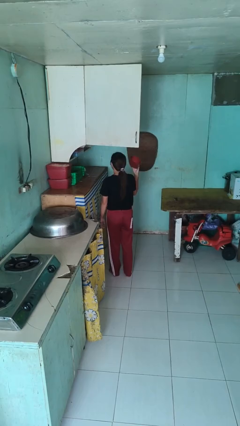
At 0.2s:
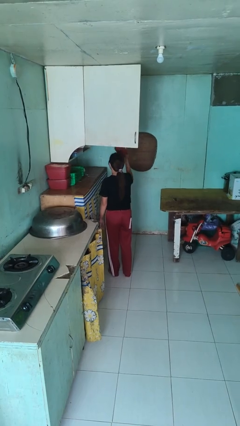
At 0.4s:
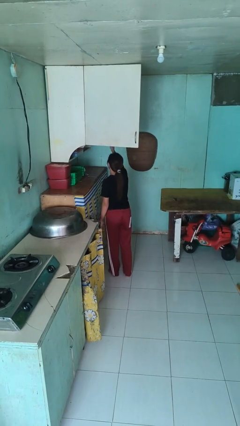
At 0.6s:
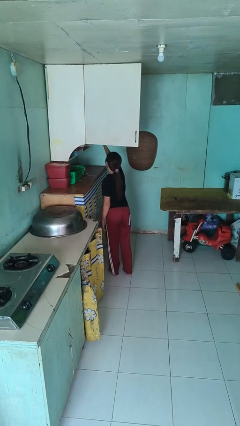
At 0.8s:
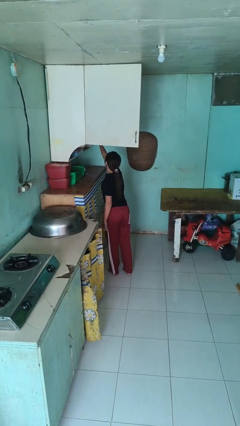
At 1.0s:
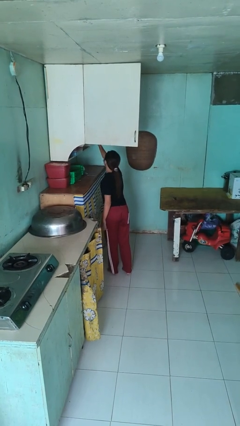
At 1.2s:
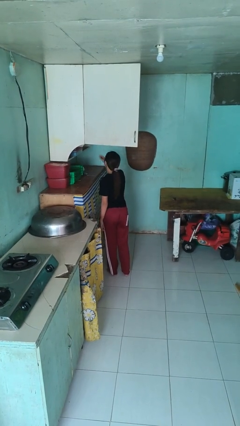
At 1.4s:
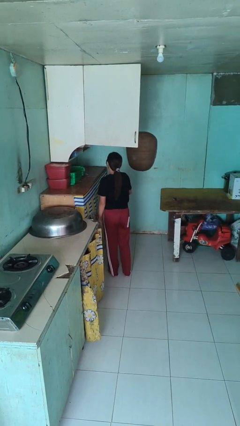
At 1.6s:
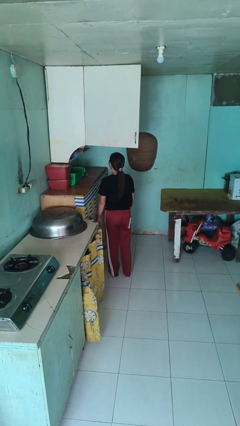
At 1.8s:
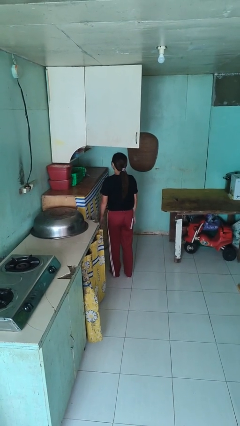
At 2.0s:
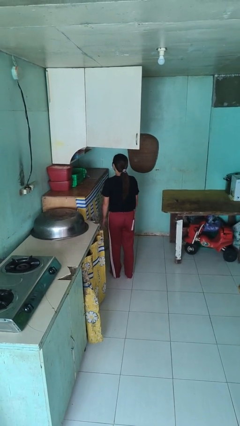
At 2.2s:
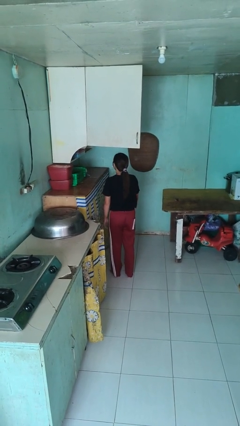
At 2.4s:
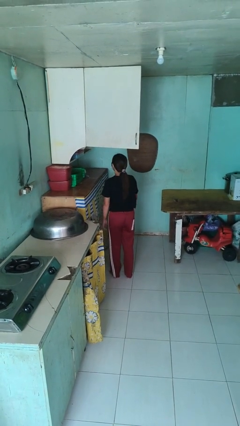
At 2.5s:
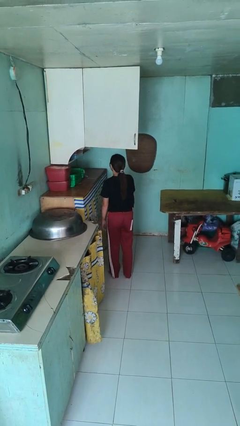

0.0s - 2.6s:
person puts object in cabinet

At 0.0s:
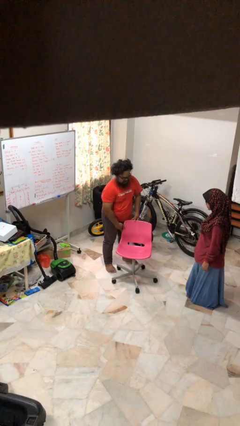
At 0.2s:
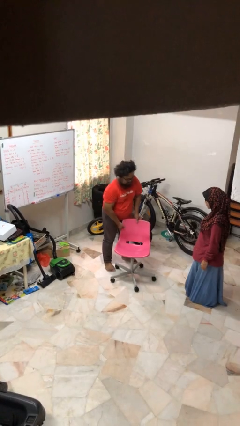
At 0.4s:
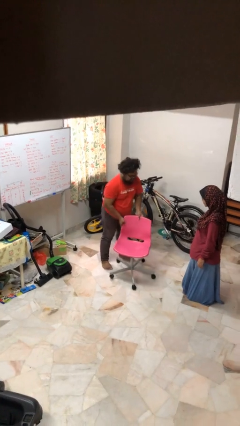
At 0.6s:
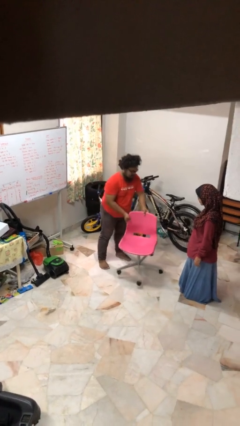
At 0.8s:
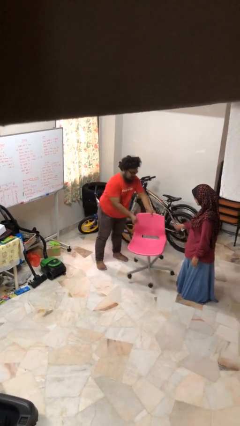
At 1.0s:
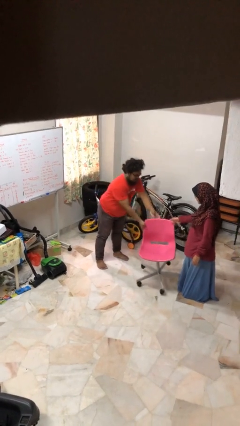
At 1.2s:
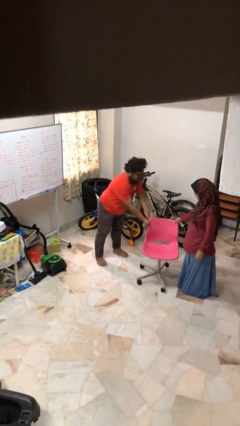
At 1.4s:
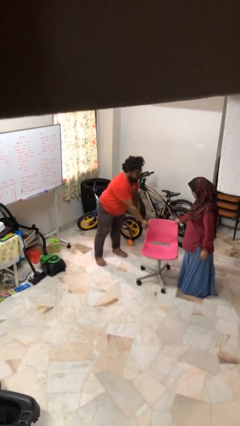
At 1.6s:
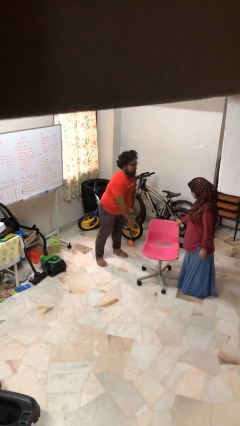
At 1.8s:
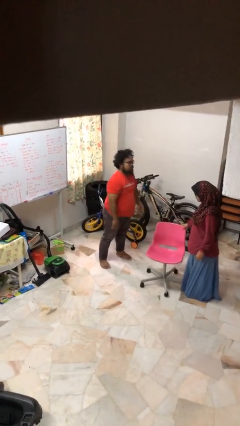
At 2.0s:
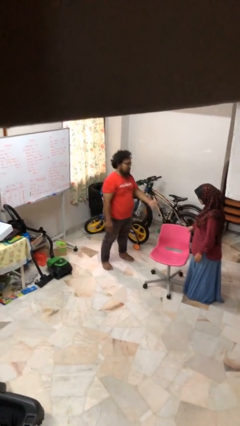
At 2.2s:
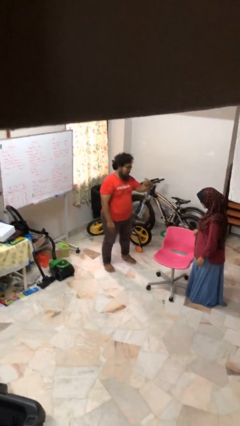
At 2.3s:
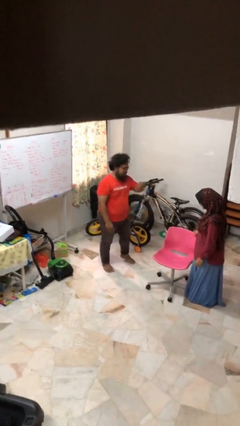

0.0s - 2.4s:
person transfers object to person

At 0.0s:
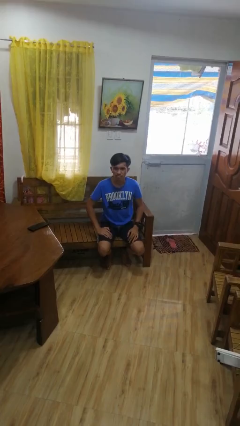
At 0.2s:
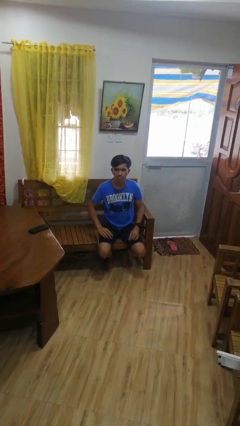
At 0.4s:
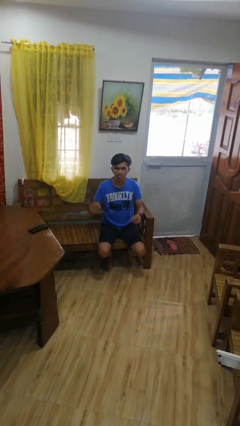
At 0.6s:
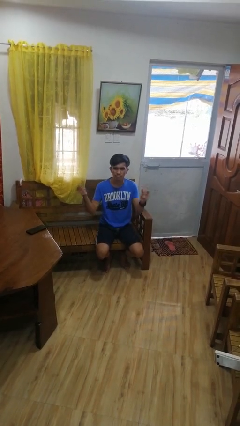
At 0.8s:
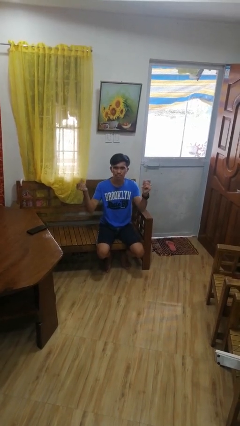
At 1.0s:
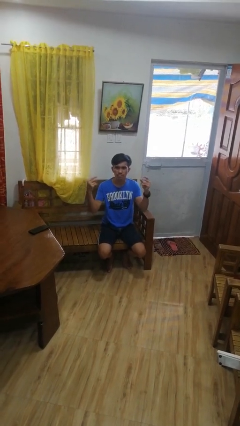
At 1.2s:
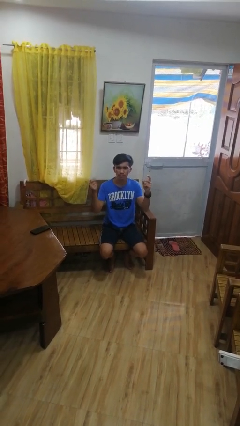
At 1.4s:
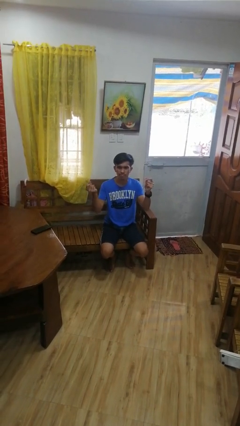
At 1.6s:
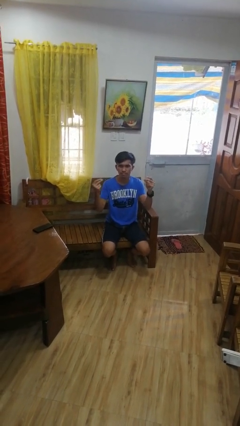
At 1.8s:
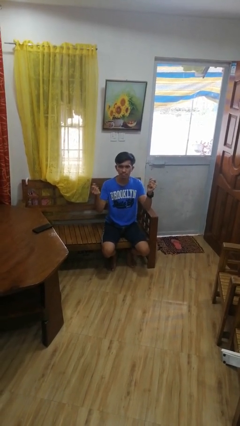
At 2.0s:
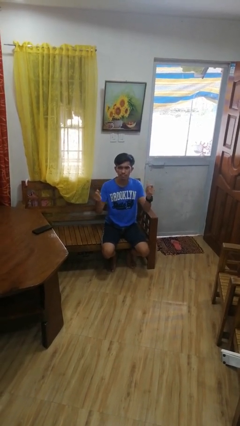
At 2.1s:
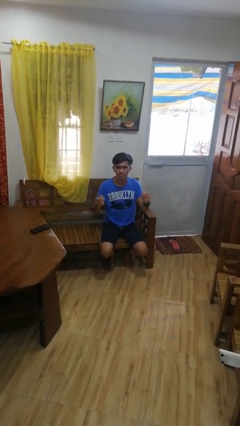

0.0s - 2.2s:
person snaps fingers

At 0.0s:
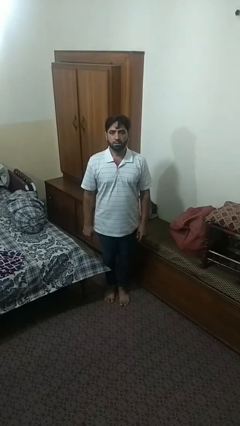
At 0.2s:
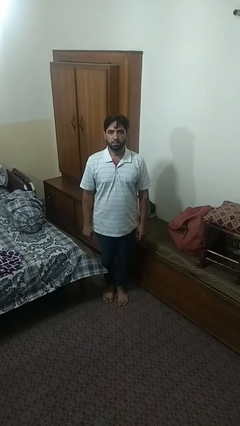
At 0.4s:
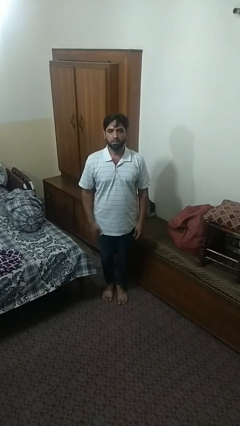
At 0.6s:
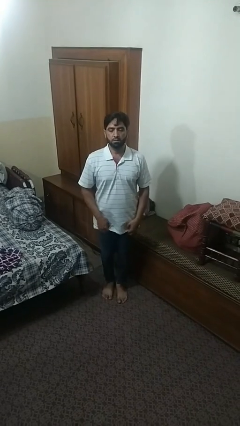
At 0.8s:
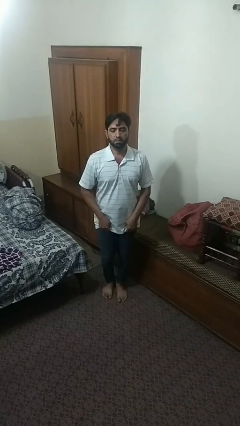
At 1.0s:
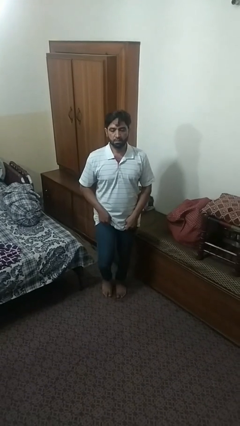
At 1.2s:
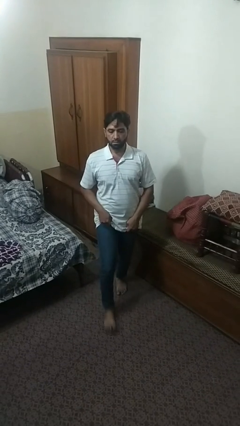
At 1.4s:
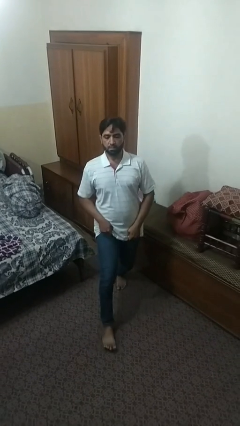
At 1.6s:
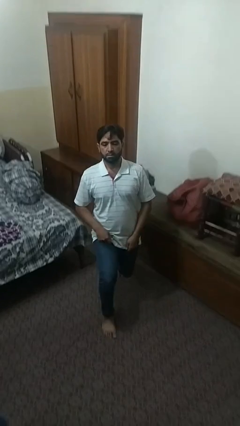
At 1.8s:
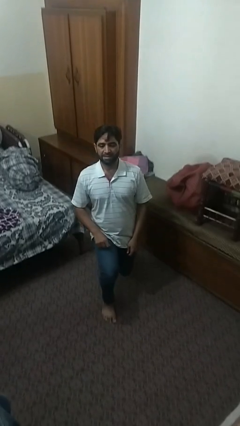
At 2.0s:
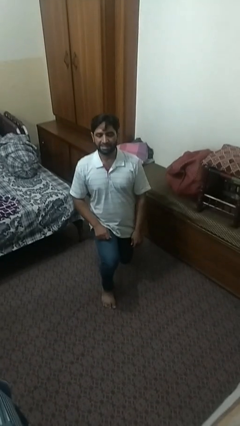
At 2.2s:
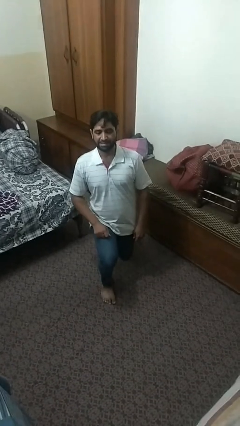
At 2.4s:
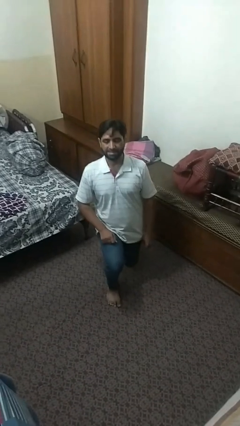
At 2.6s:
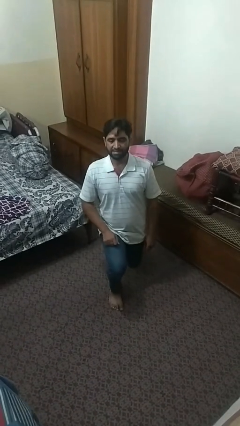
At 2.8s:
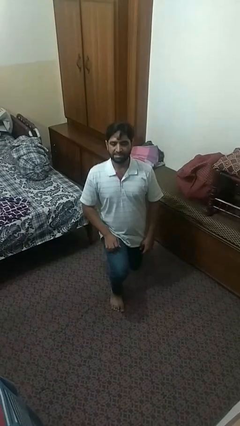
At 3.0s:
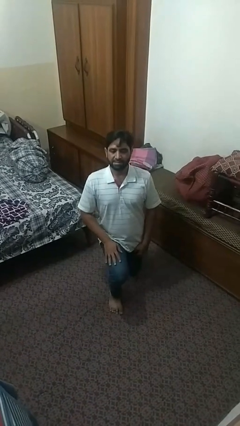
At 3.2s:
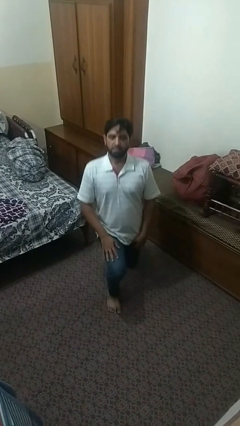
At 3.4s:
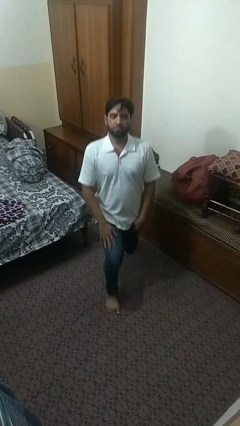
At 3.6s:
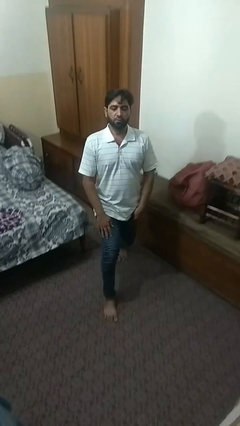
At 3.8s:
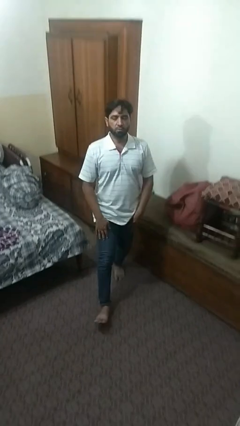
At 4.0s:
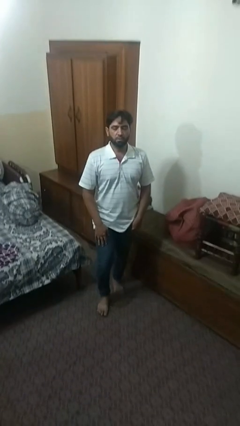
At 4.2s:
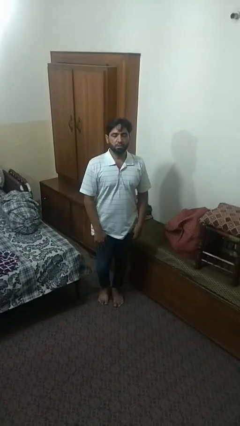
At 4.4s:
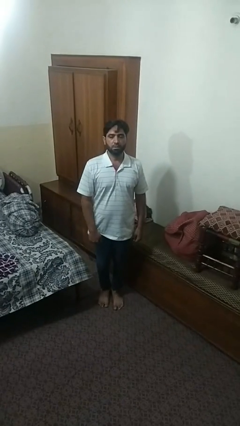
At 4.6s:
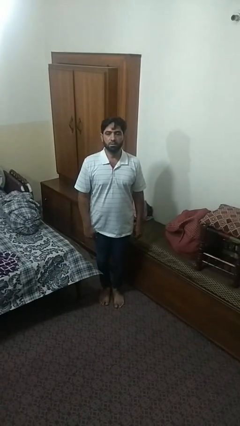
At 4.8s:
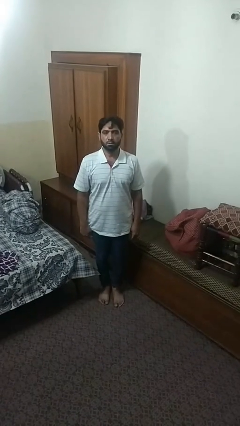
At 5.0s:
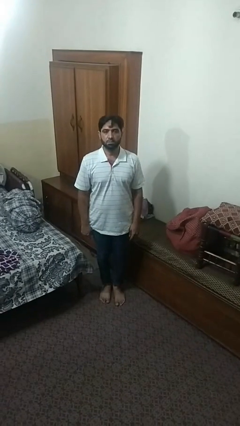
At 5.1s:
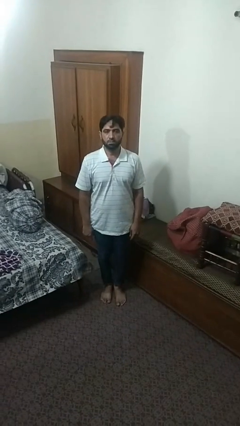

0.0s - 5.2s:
person exercises with lunges

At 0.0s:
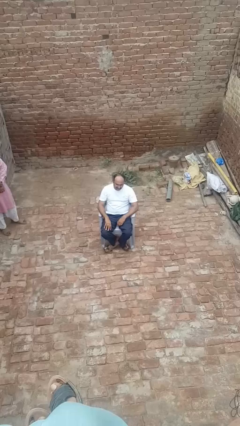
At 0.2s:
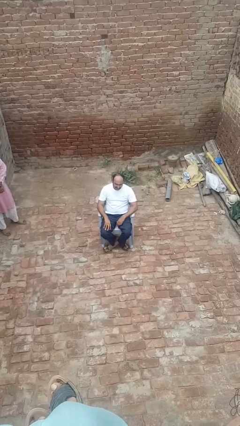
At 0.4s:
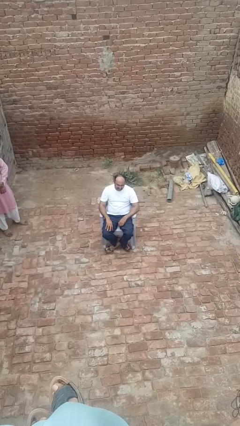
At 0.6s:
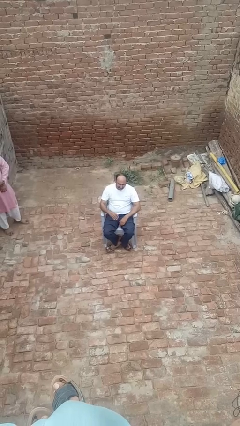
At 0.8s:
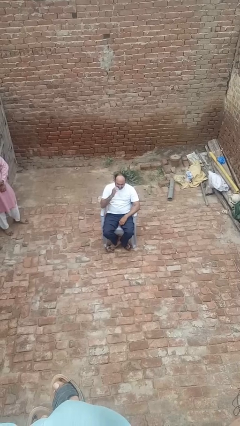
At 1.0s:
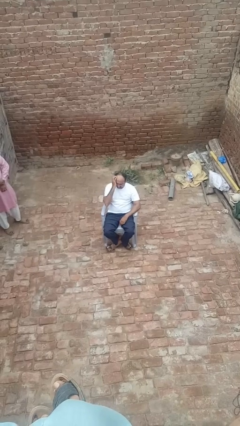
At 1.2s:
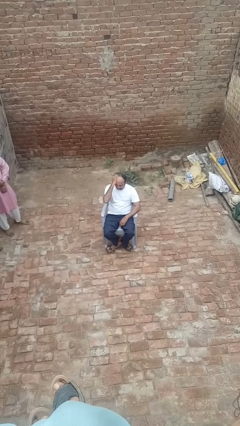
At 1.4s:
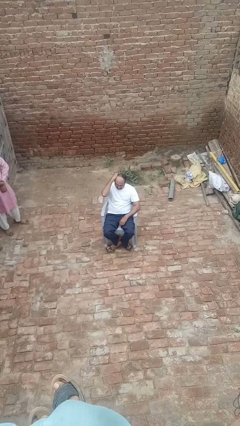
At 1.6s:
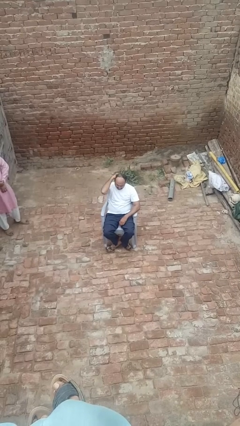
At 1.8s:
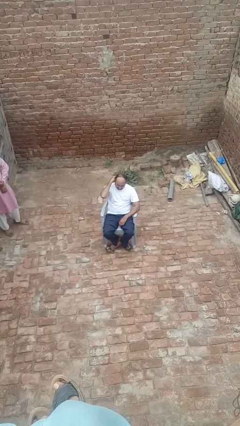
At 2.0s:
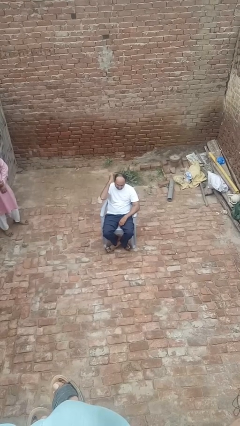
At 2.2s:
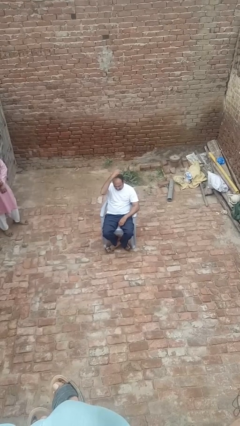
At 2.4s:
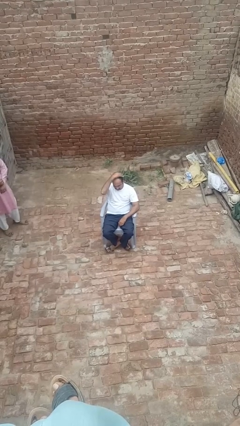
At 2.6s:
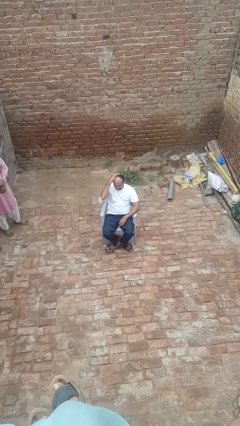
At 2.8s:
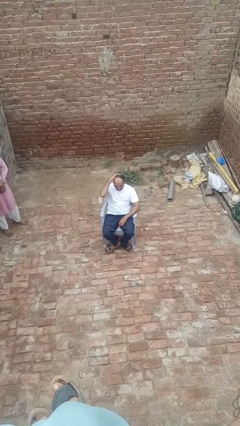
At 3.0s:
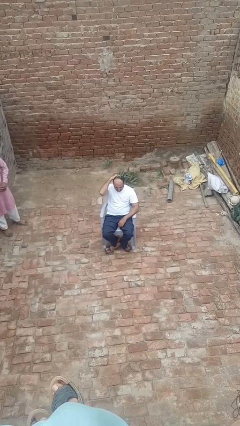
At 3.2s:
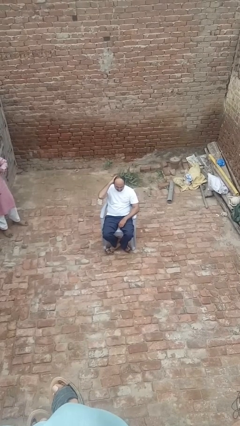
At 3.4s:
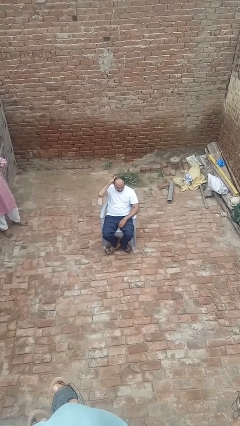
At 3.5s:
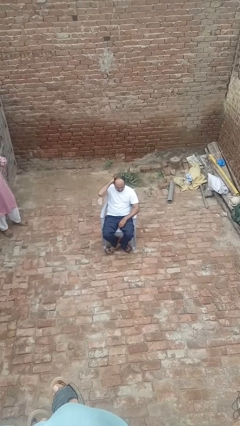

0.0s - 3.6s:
person strokes hair

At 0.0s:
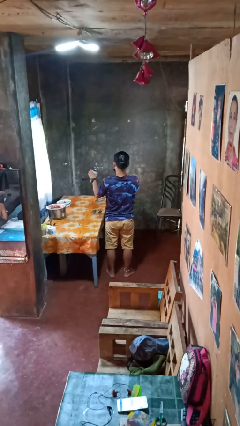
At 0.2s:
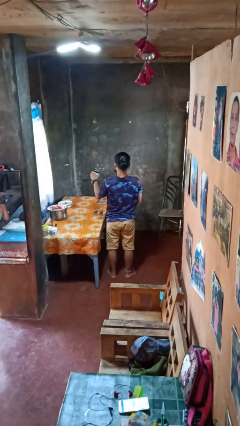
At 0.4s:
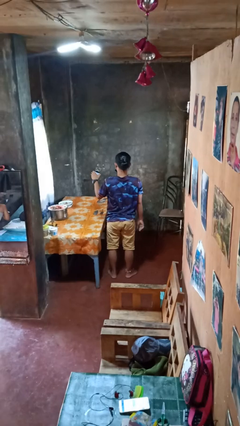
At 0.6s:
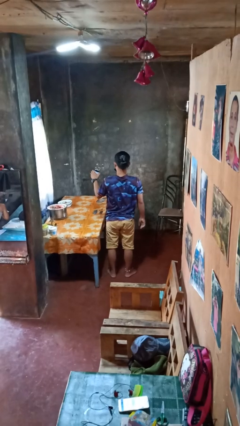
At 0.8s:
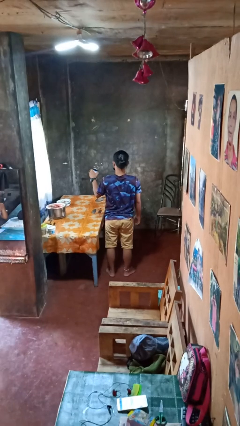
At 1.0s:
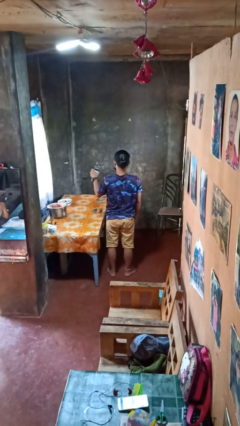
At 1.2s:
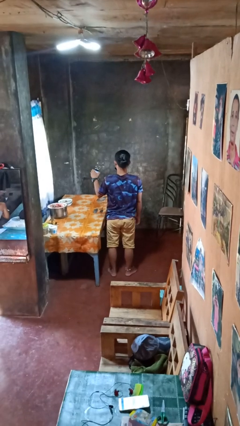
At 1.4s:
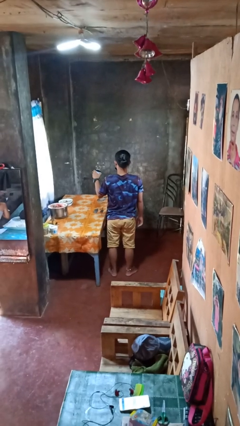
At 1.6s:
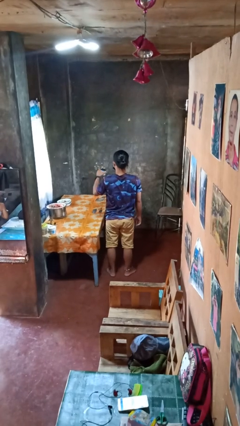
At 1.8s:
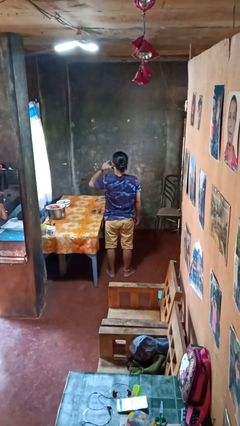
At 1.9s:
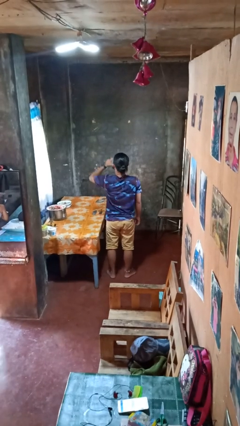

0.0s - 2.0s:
person opens beverage can
